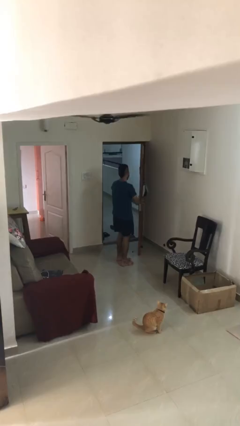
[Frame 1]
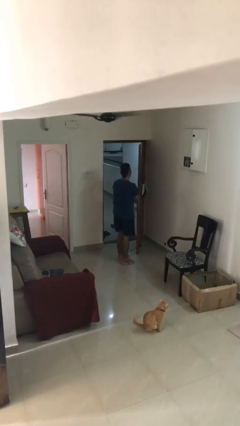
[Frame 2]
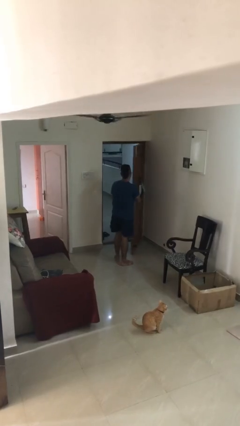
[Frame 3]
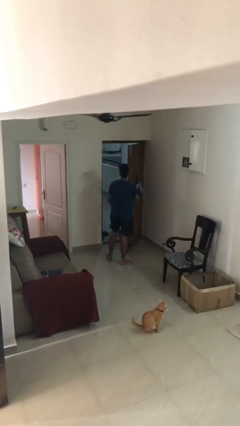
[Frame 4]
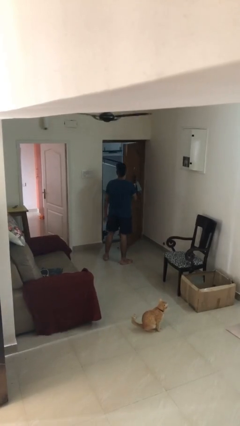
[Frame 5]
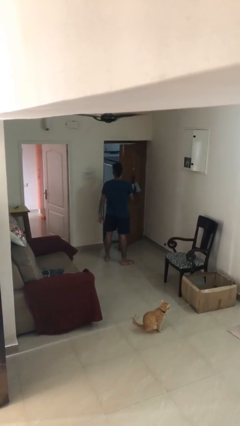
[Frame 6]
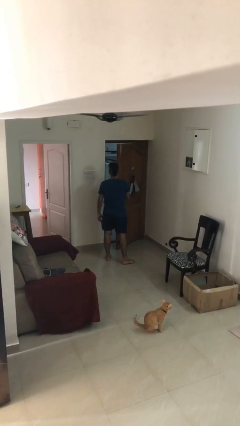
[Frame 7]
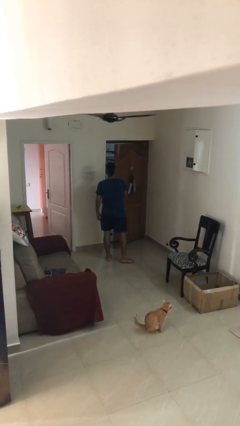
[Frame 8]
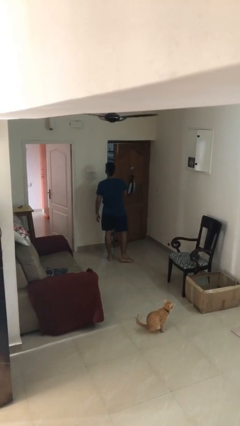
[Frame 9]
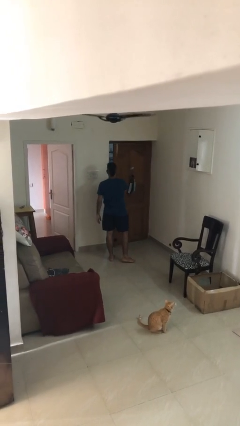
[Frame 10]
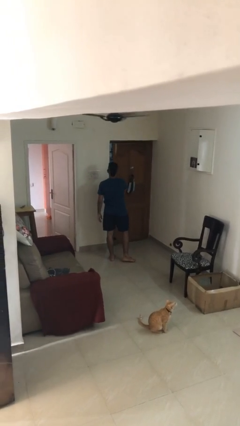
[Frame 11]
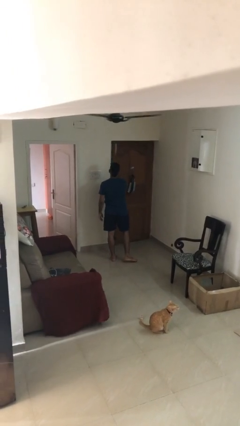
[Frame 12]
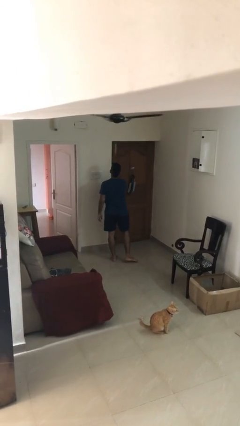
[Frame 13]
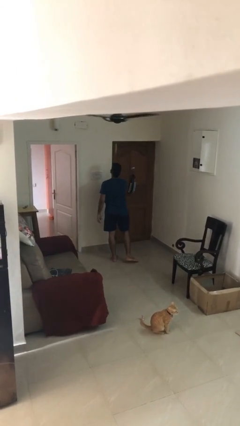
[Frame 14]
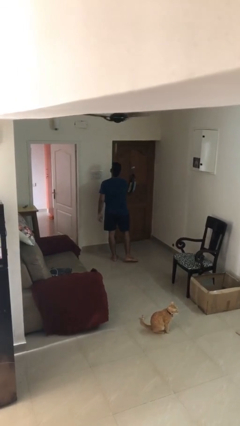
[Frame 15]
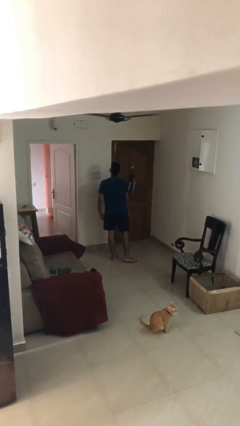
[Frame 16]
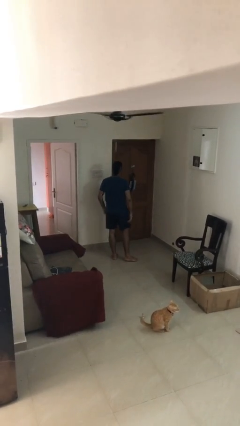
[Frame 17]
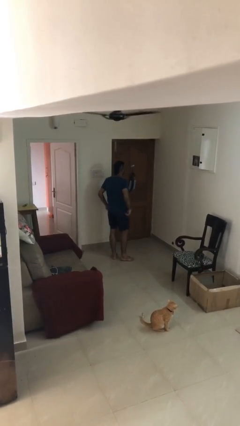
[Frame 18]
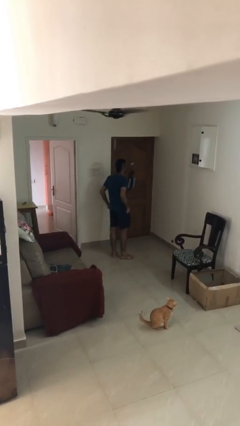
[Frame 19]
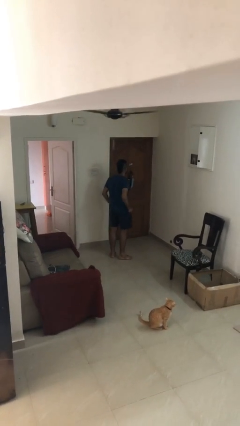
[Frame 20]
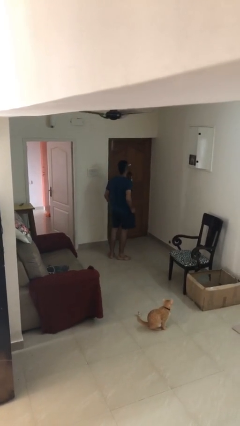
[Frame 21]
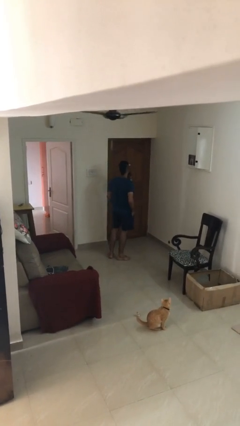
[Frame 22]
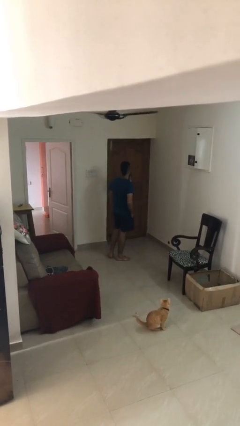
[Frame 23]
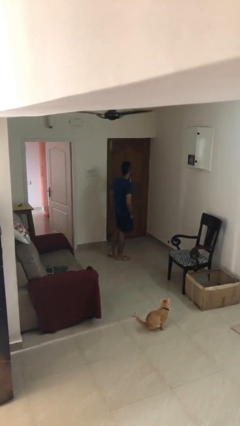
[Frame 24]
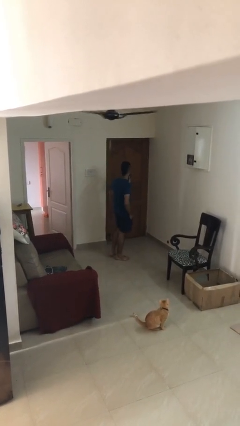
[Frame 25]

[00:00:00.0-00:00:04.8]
person closes facility door

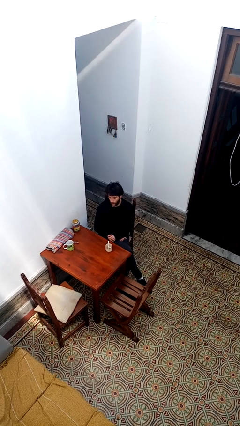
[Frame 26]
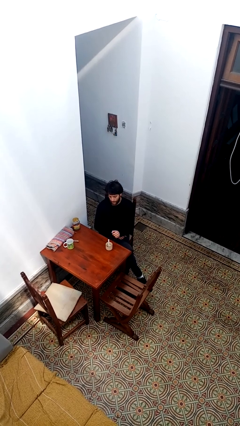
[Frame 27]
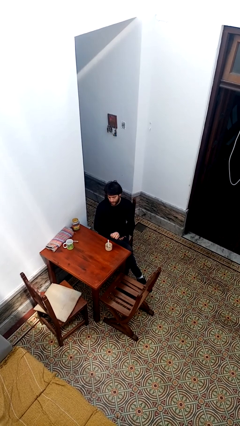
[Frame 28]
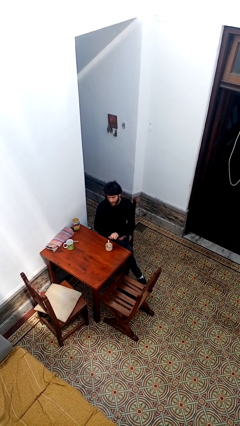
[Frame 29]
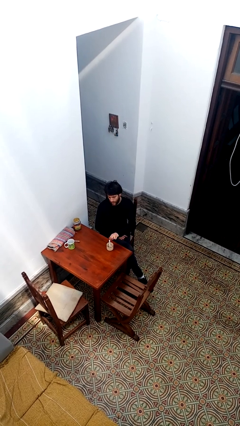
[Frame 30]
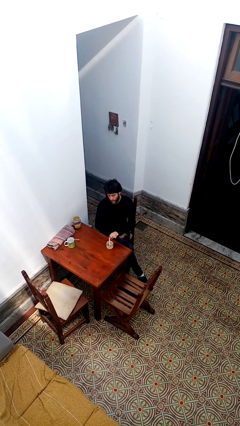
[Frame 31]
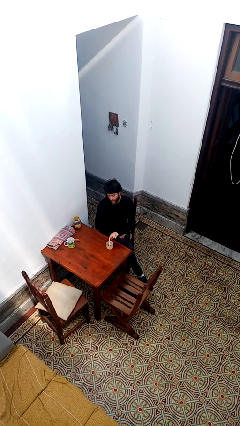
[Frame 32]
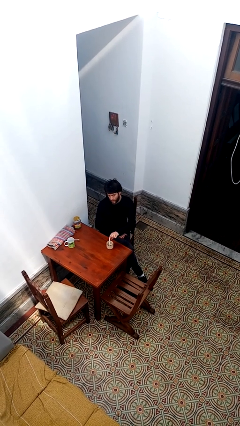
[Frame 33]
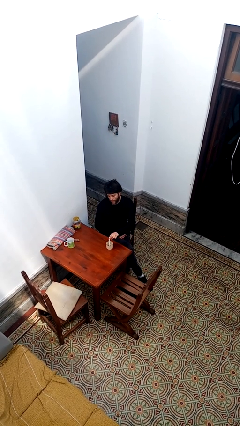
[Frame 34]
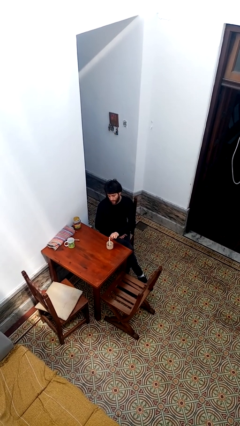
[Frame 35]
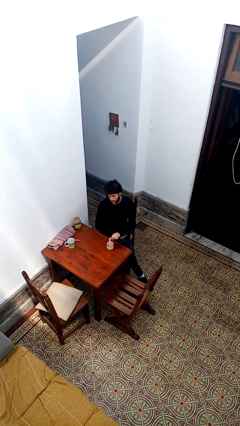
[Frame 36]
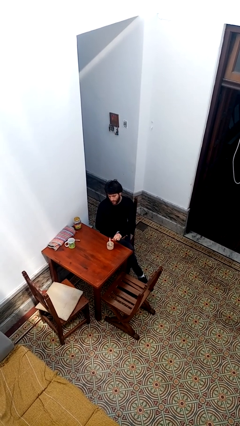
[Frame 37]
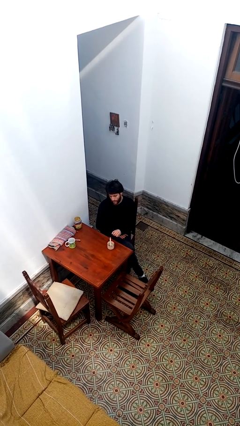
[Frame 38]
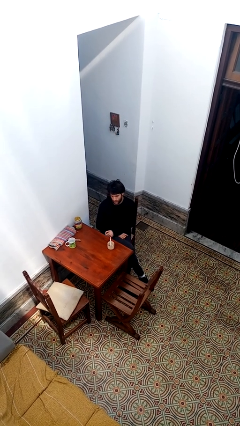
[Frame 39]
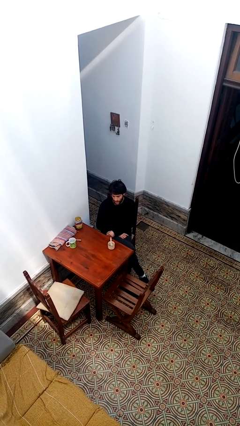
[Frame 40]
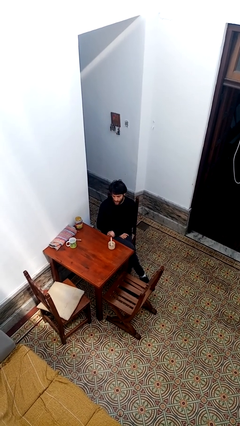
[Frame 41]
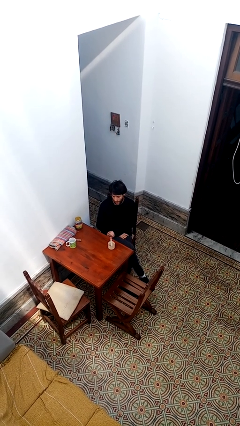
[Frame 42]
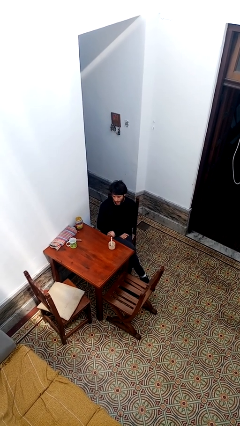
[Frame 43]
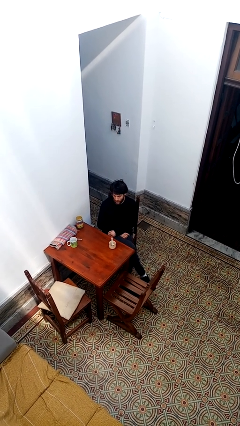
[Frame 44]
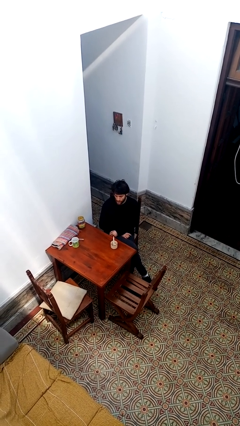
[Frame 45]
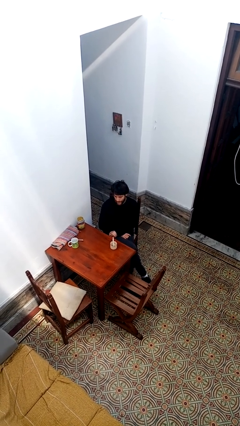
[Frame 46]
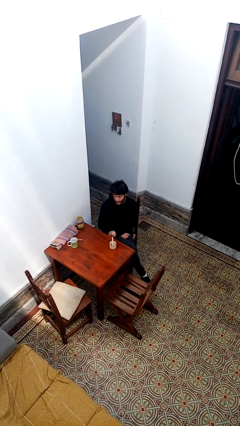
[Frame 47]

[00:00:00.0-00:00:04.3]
person lights candle

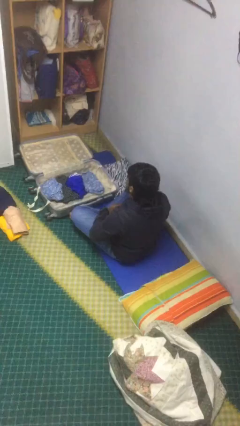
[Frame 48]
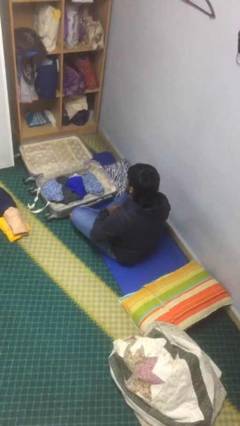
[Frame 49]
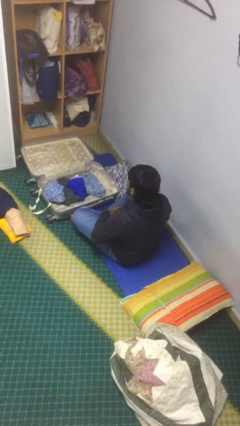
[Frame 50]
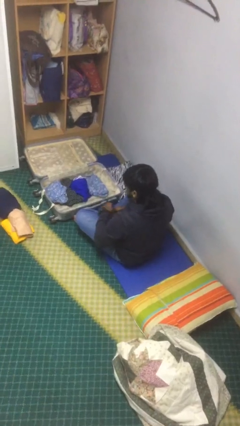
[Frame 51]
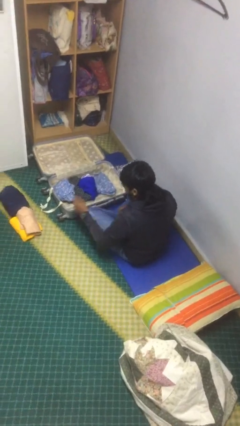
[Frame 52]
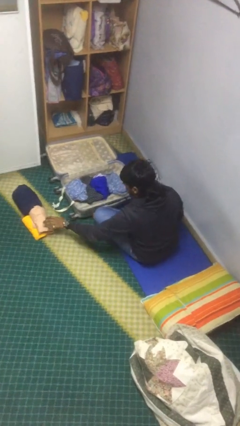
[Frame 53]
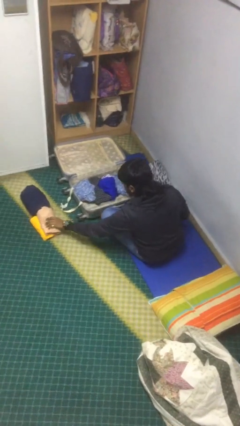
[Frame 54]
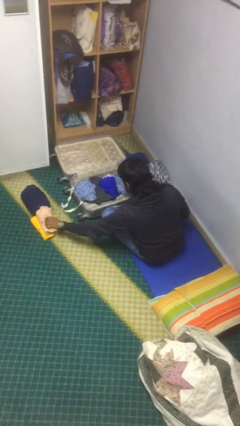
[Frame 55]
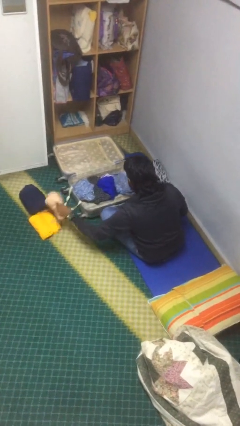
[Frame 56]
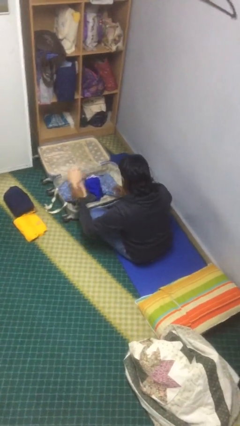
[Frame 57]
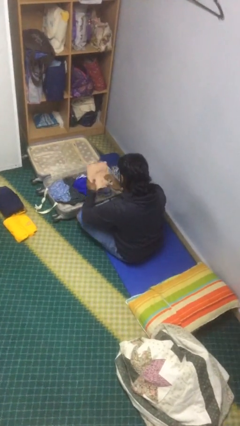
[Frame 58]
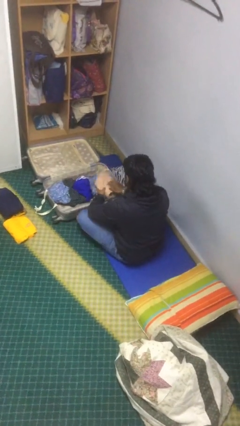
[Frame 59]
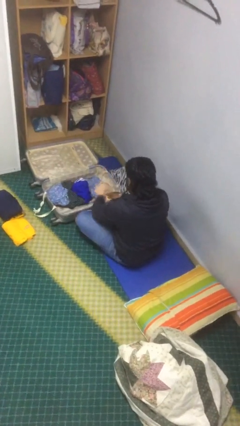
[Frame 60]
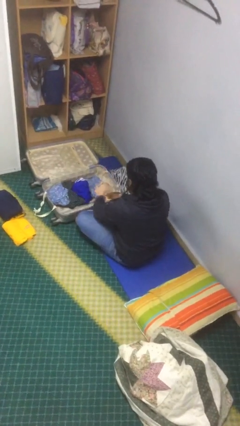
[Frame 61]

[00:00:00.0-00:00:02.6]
person loads clothes into suitcase

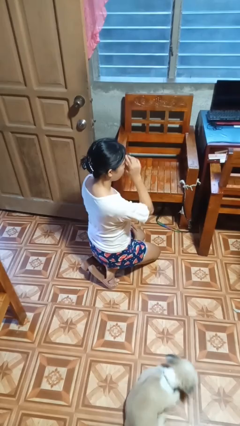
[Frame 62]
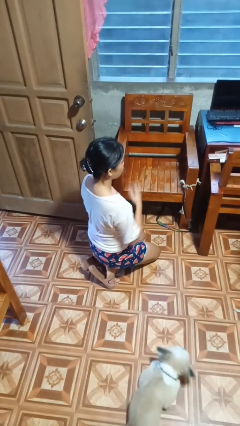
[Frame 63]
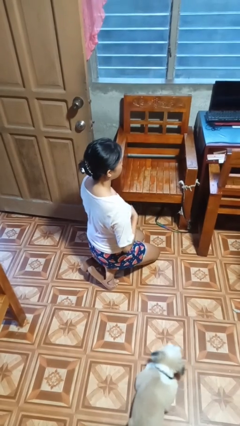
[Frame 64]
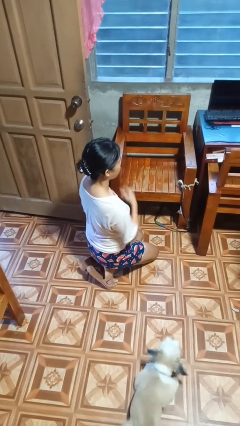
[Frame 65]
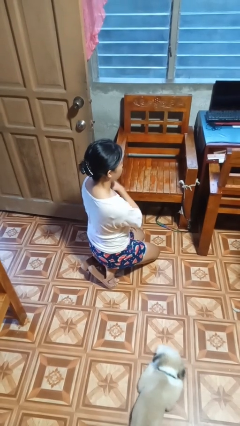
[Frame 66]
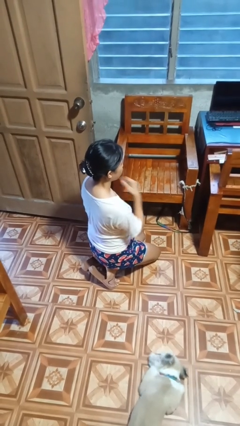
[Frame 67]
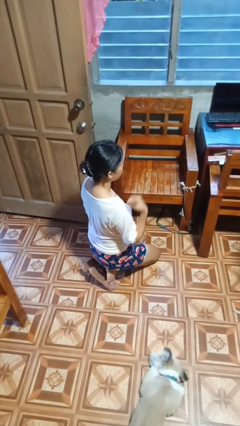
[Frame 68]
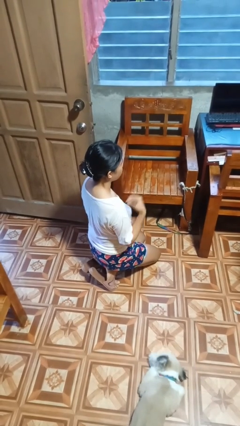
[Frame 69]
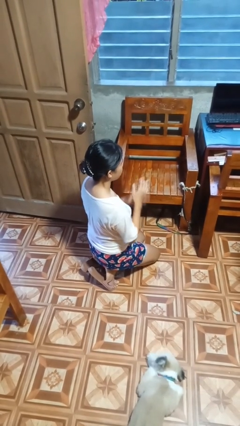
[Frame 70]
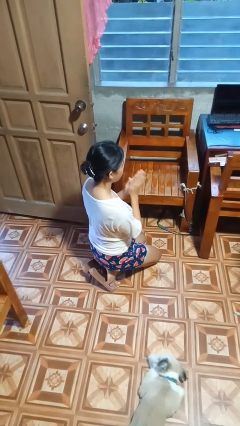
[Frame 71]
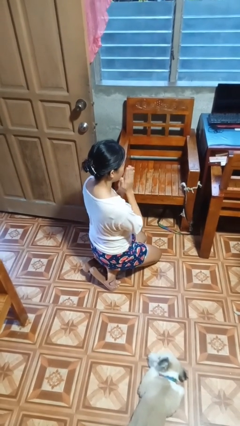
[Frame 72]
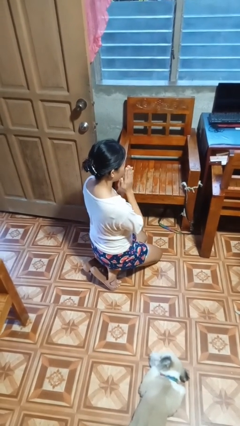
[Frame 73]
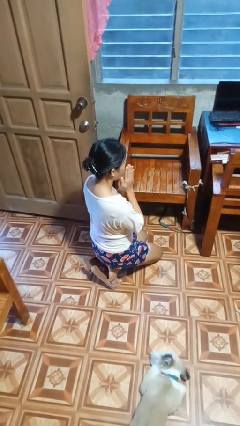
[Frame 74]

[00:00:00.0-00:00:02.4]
person prays

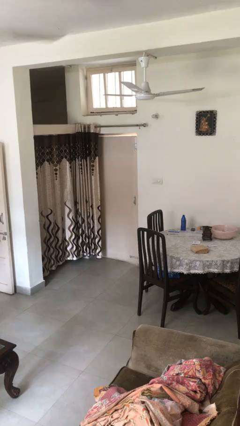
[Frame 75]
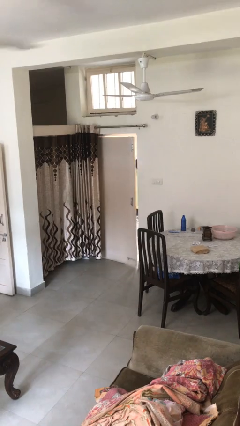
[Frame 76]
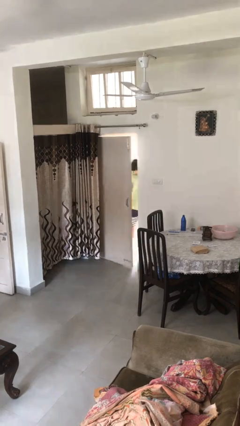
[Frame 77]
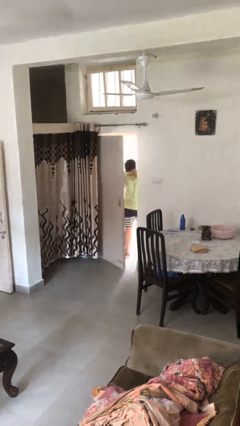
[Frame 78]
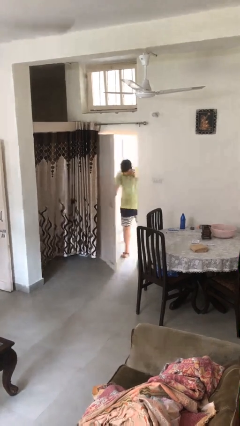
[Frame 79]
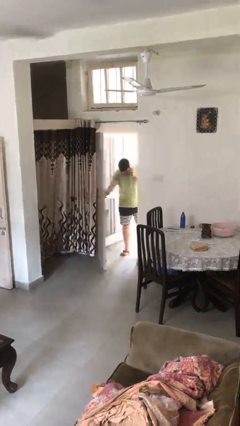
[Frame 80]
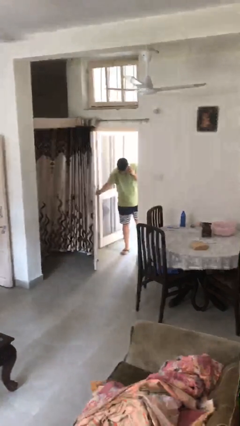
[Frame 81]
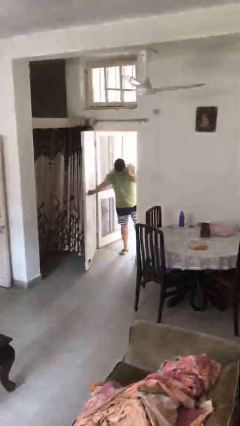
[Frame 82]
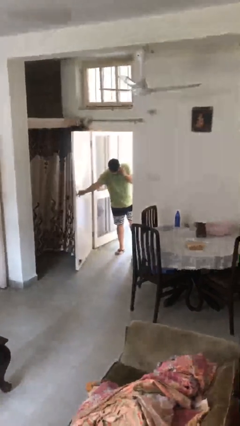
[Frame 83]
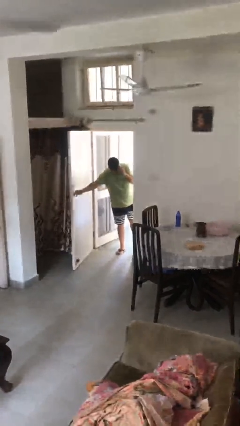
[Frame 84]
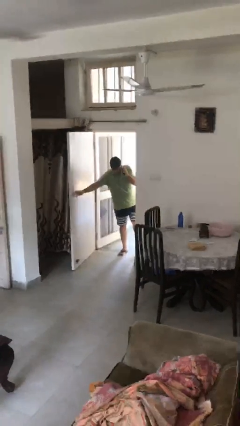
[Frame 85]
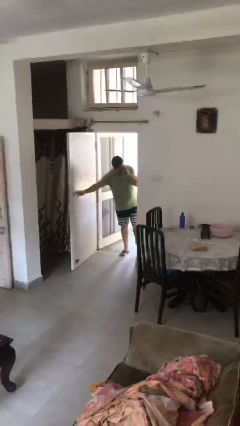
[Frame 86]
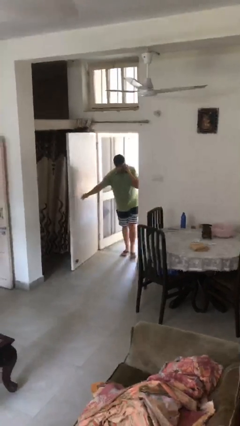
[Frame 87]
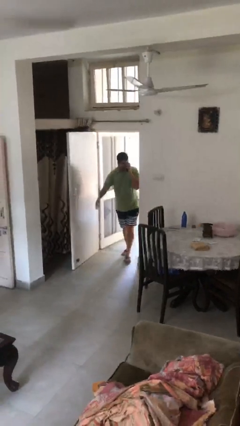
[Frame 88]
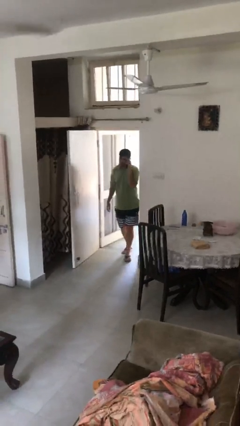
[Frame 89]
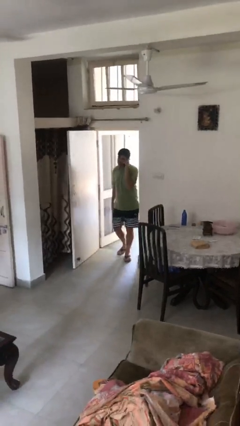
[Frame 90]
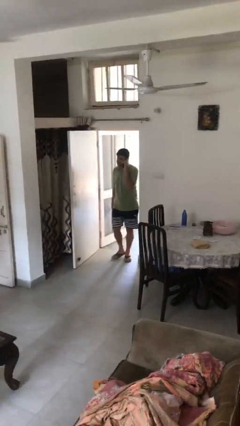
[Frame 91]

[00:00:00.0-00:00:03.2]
person opens facility door
